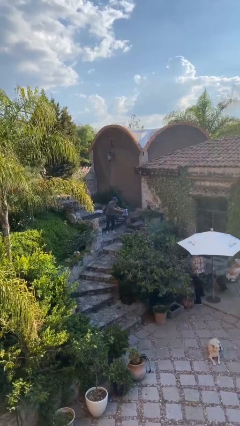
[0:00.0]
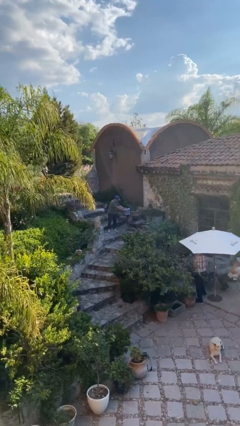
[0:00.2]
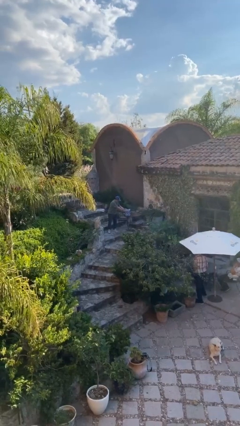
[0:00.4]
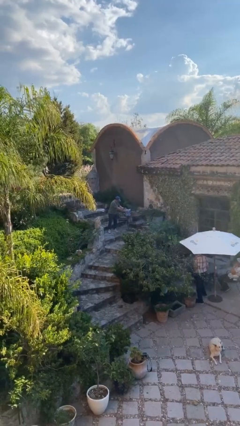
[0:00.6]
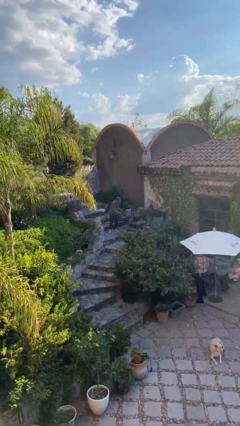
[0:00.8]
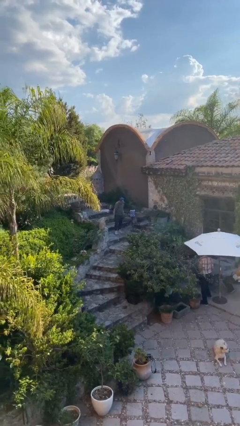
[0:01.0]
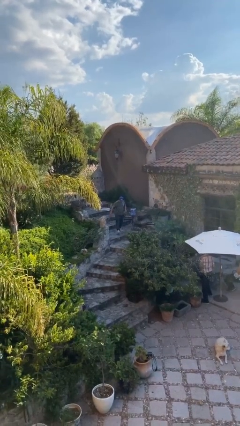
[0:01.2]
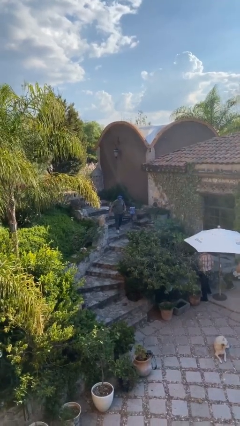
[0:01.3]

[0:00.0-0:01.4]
person puts down object on table

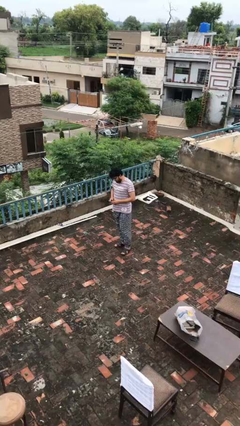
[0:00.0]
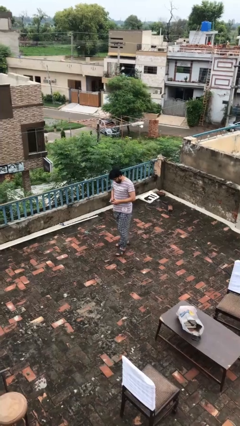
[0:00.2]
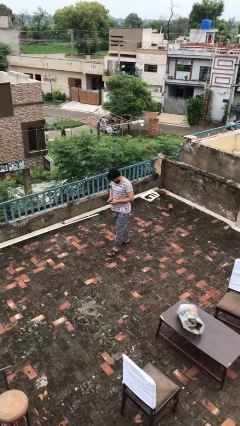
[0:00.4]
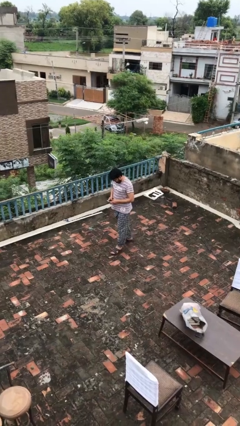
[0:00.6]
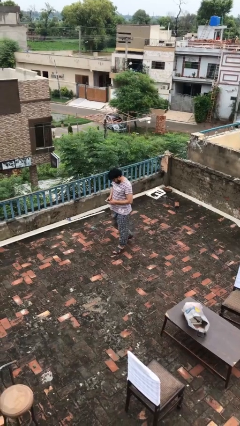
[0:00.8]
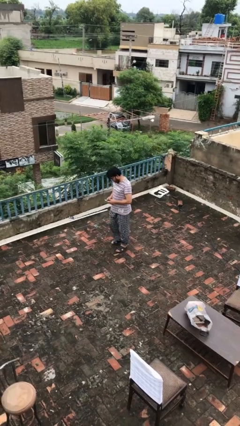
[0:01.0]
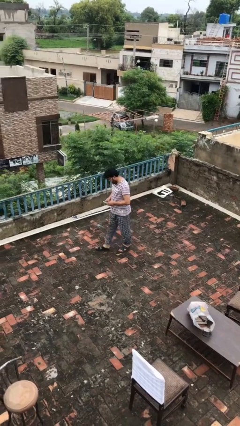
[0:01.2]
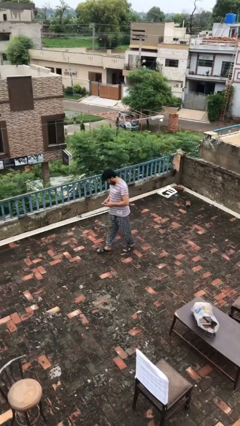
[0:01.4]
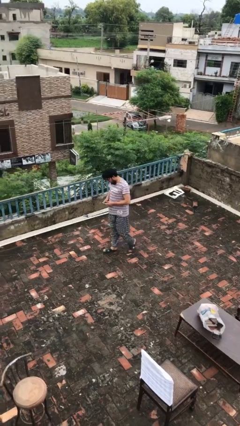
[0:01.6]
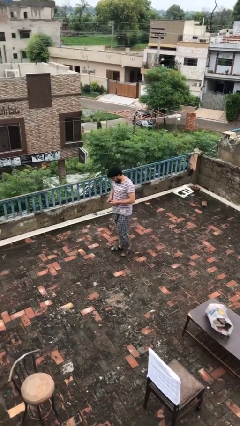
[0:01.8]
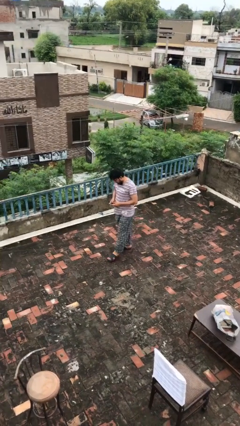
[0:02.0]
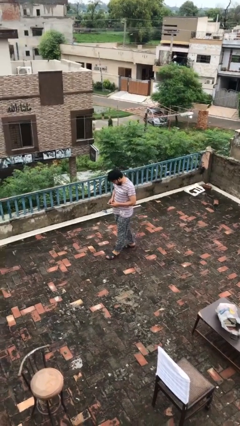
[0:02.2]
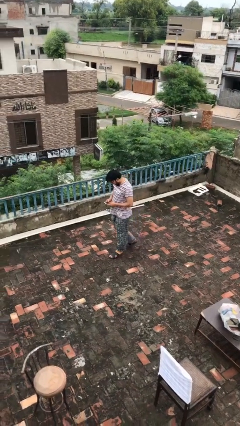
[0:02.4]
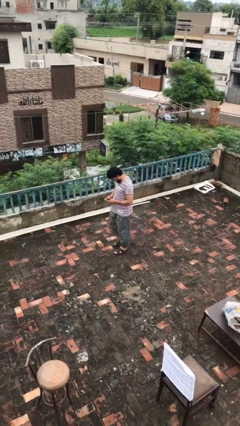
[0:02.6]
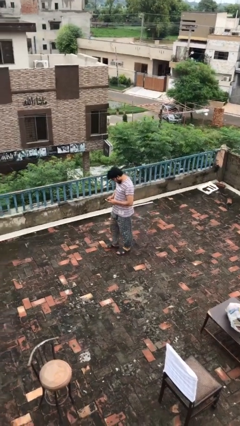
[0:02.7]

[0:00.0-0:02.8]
person texts on phone

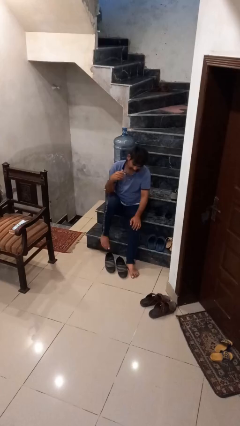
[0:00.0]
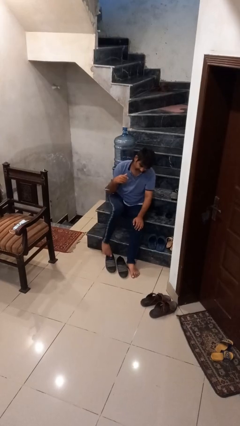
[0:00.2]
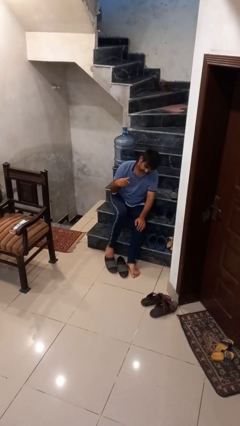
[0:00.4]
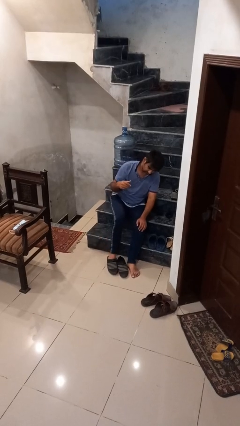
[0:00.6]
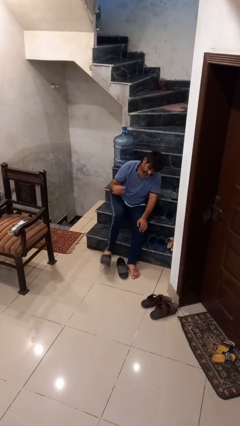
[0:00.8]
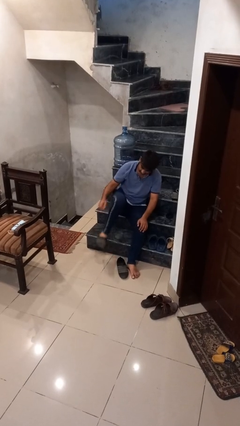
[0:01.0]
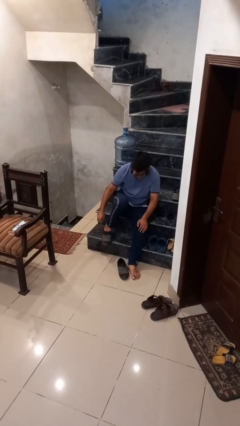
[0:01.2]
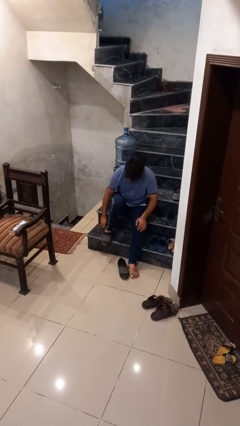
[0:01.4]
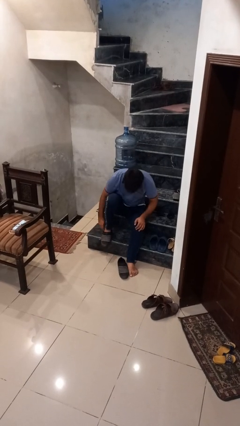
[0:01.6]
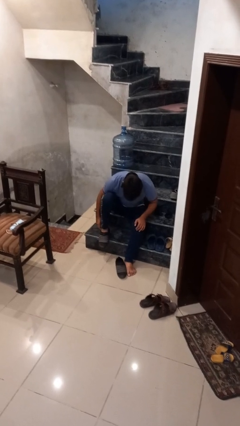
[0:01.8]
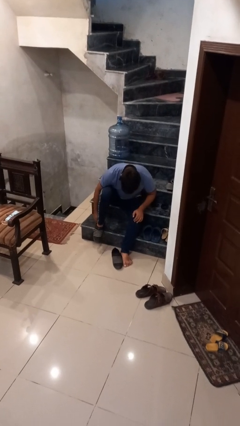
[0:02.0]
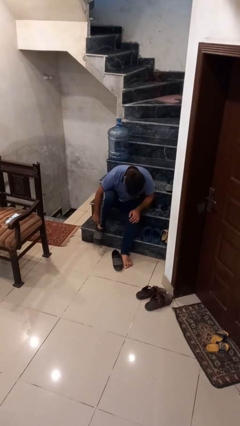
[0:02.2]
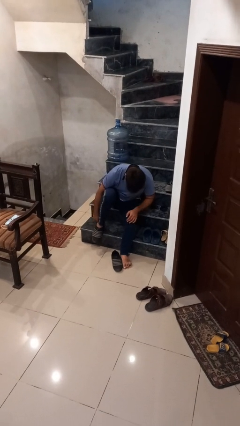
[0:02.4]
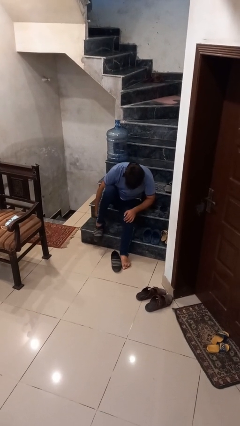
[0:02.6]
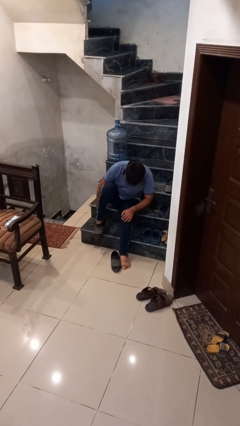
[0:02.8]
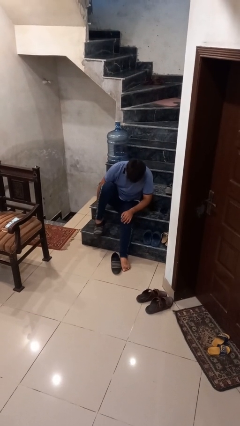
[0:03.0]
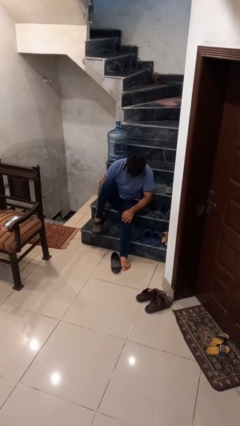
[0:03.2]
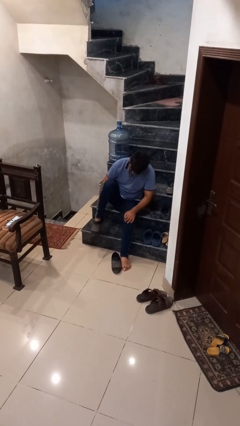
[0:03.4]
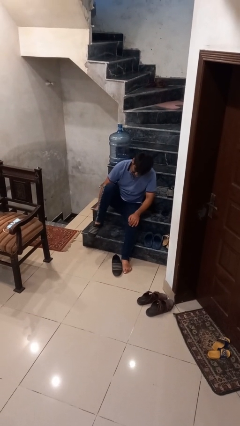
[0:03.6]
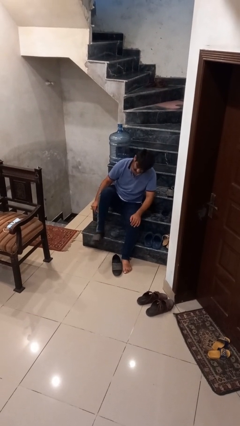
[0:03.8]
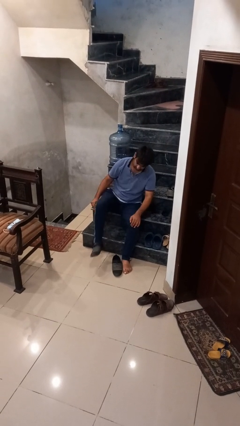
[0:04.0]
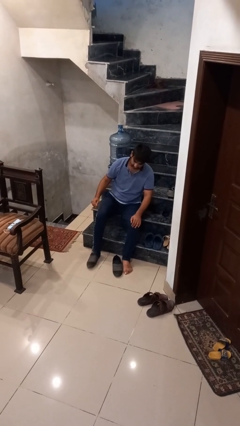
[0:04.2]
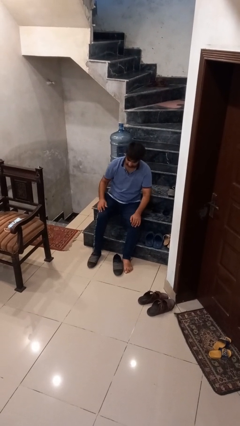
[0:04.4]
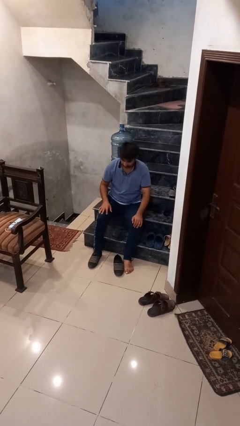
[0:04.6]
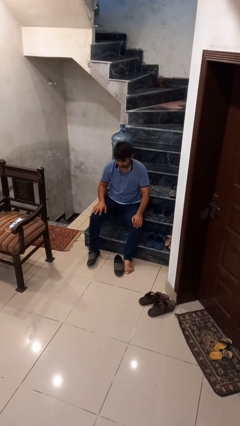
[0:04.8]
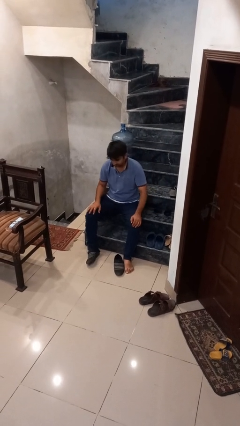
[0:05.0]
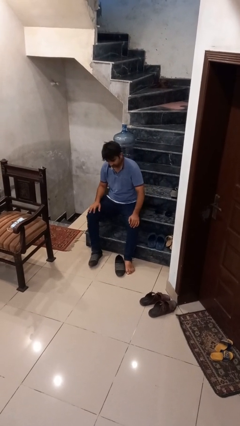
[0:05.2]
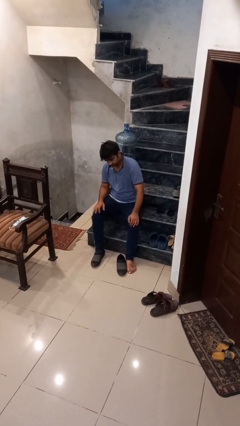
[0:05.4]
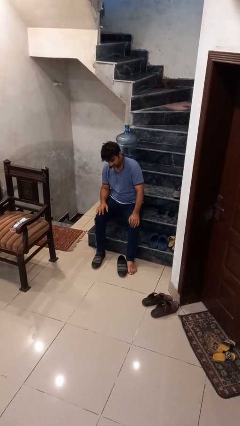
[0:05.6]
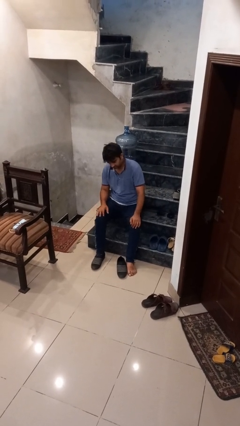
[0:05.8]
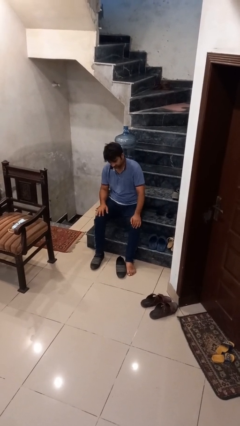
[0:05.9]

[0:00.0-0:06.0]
person puts on shoes

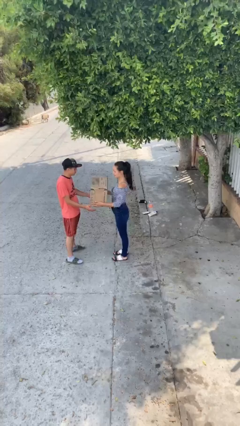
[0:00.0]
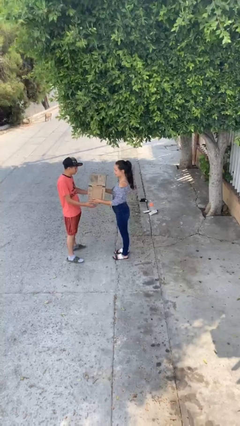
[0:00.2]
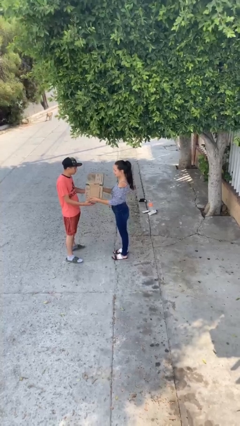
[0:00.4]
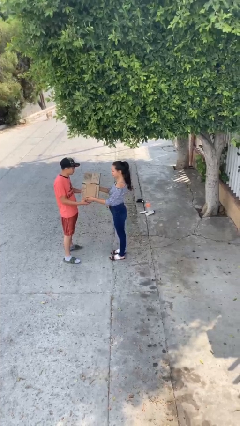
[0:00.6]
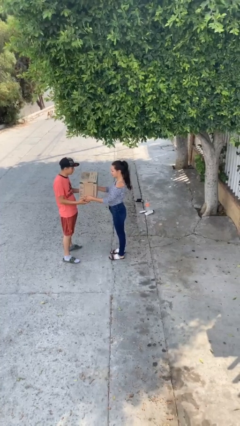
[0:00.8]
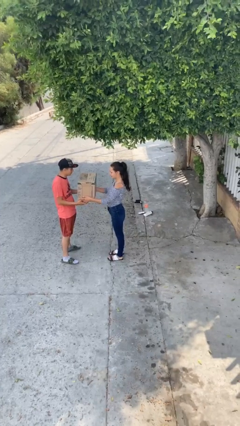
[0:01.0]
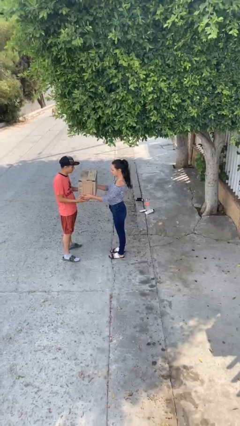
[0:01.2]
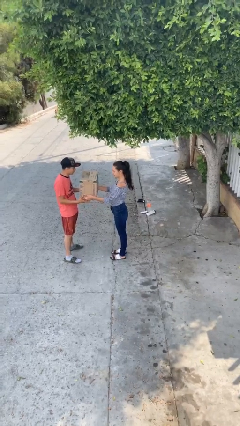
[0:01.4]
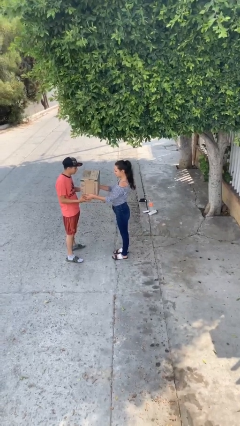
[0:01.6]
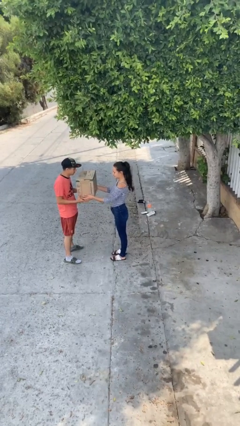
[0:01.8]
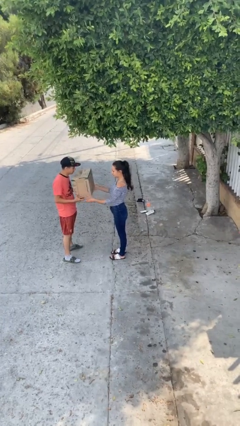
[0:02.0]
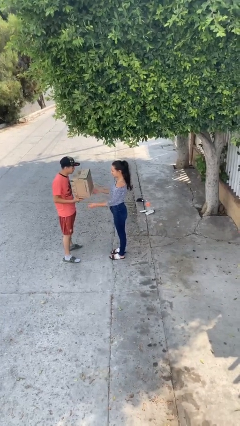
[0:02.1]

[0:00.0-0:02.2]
person transfers object to person

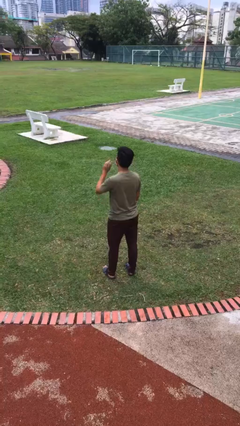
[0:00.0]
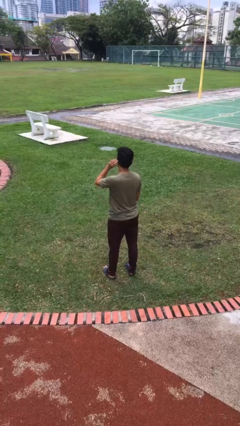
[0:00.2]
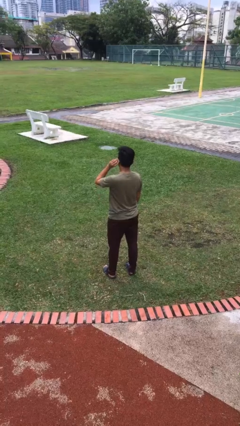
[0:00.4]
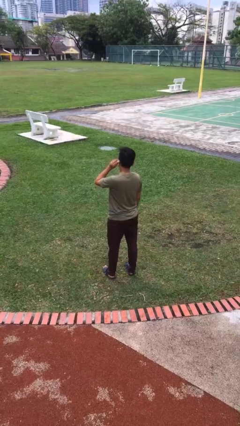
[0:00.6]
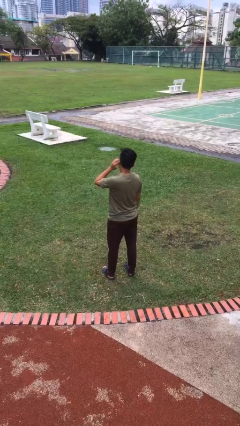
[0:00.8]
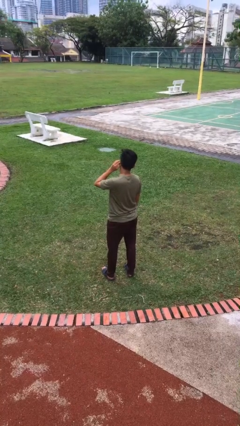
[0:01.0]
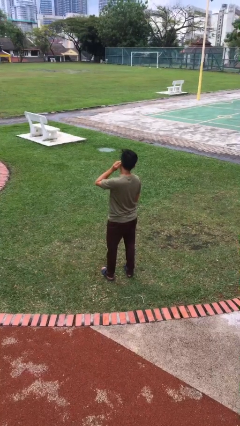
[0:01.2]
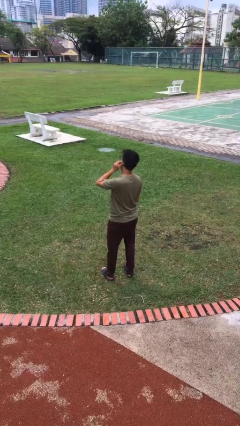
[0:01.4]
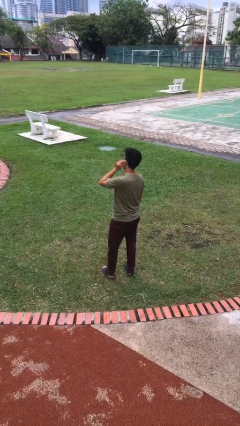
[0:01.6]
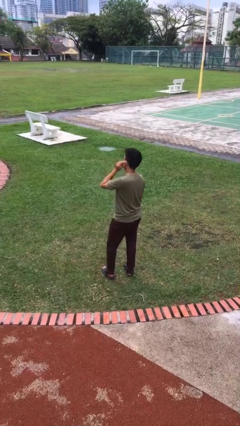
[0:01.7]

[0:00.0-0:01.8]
person touches earlobe

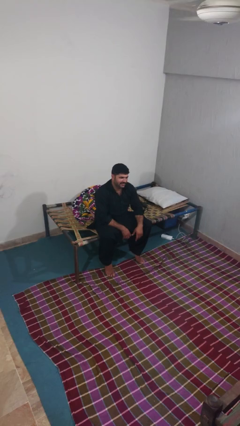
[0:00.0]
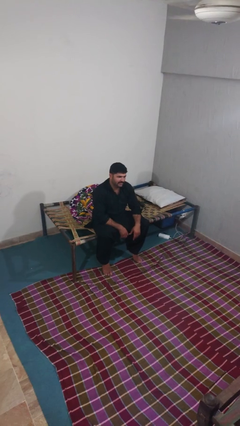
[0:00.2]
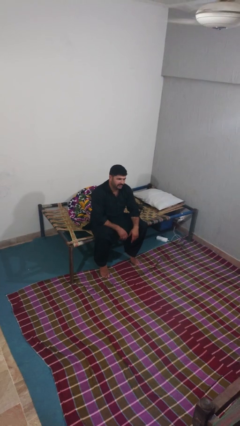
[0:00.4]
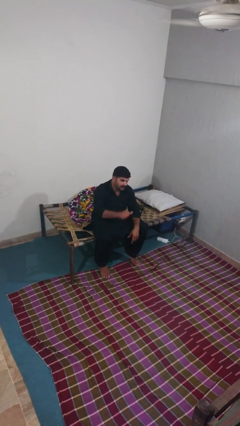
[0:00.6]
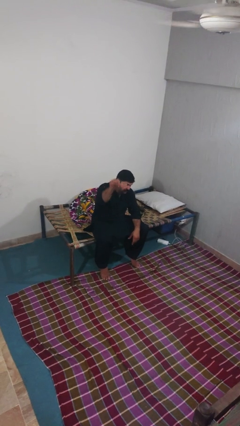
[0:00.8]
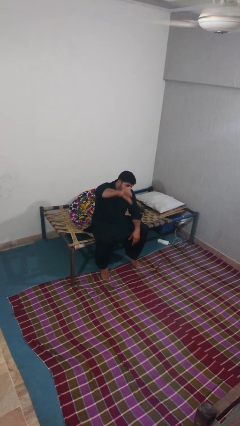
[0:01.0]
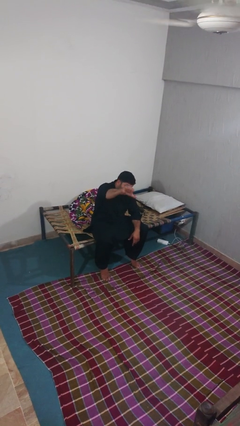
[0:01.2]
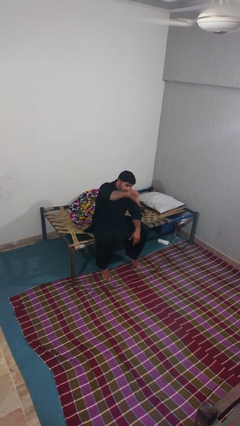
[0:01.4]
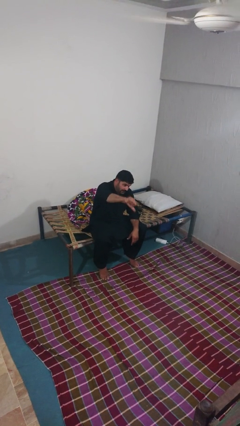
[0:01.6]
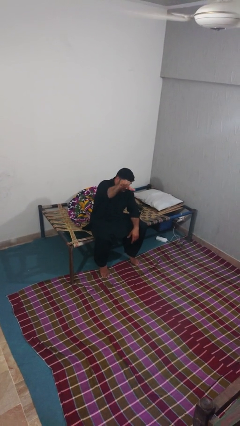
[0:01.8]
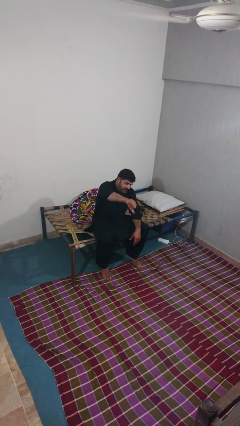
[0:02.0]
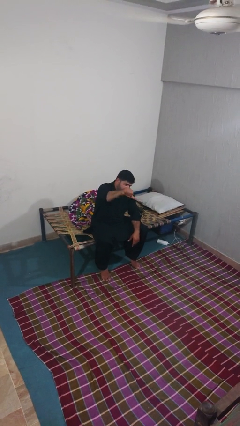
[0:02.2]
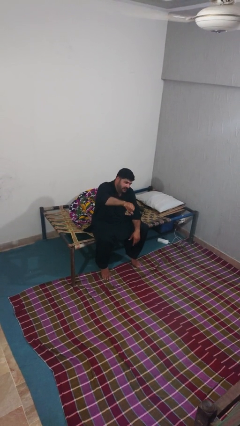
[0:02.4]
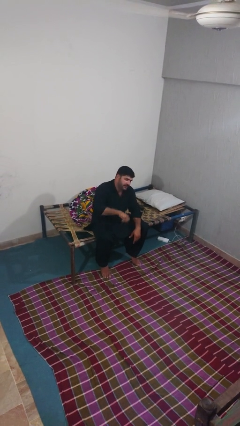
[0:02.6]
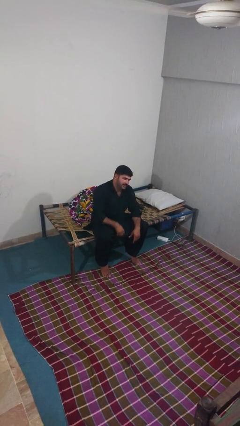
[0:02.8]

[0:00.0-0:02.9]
person gestures thumbs down

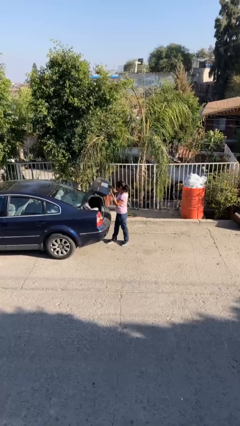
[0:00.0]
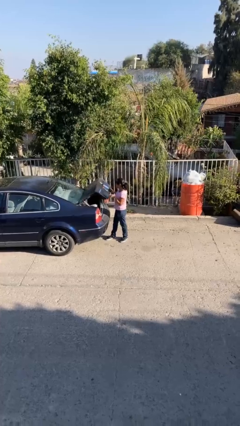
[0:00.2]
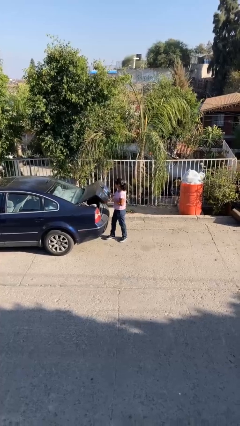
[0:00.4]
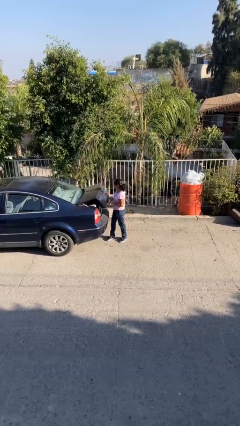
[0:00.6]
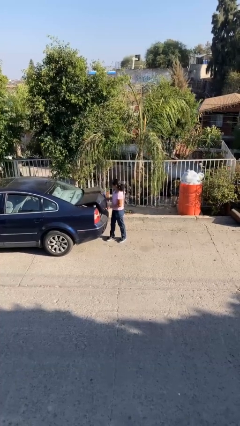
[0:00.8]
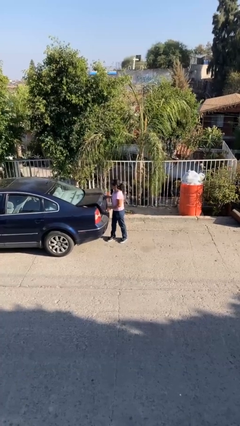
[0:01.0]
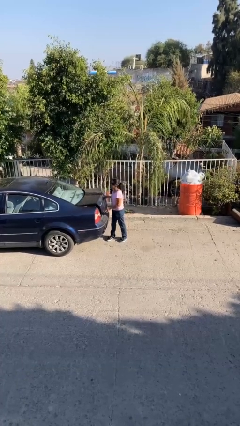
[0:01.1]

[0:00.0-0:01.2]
person closes car trunk
